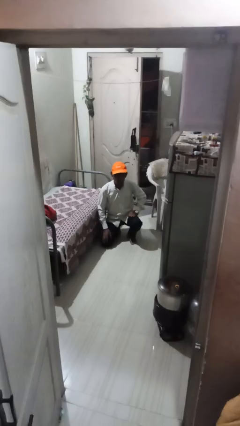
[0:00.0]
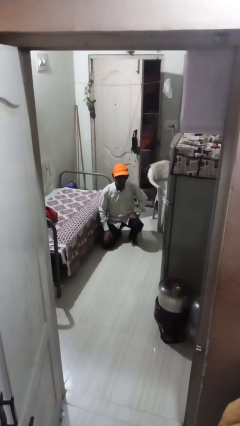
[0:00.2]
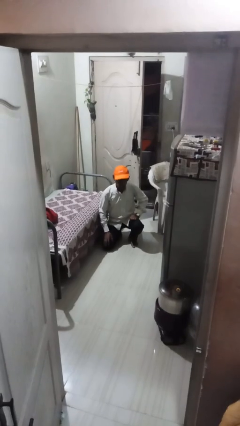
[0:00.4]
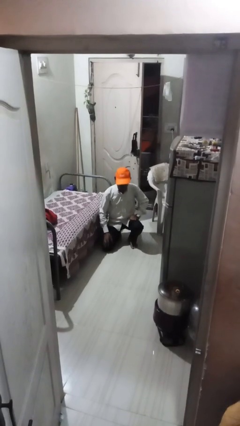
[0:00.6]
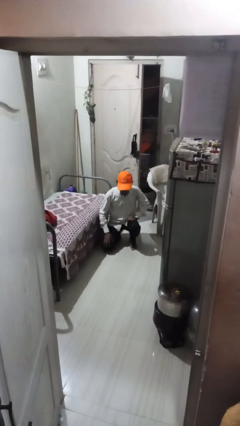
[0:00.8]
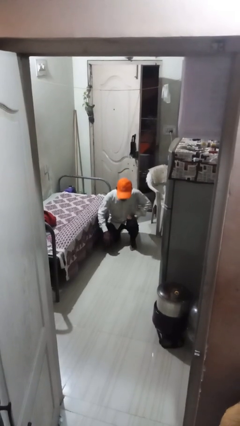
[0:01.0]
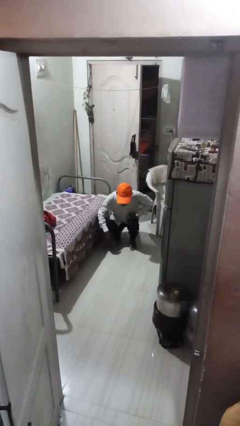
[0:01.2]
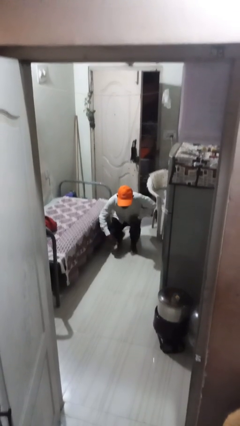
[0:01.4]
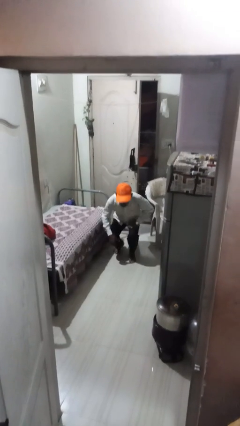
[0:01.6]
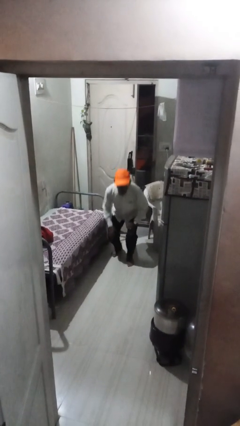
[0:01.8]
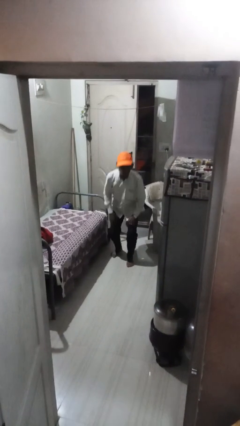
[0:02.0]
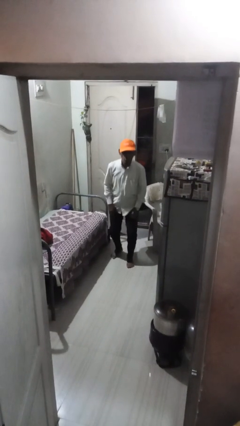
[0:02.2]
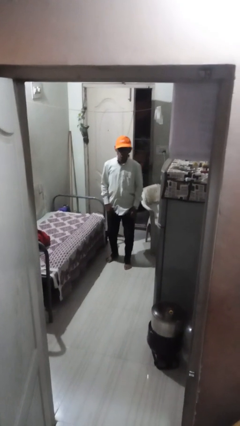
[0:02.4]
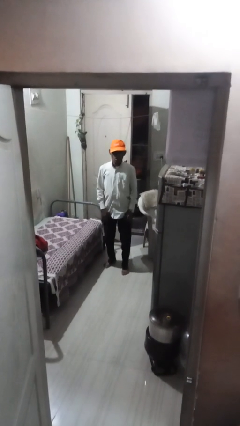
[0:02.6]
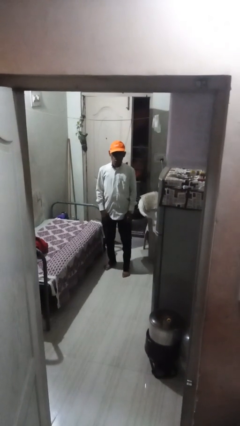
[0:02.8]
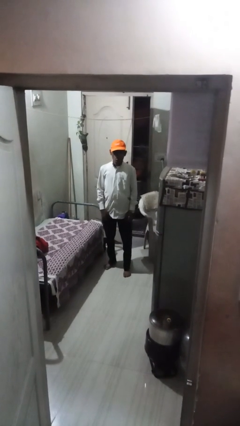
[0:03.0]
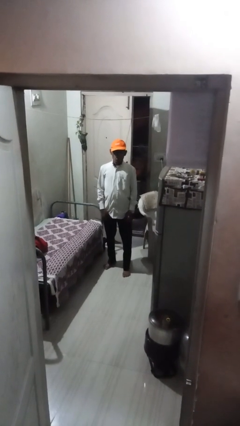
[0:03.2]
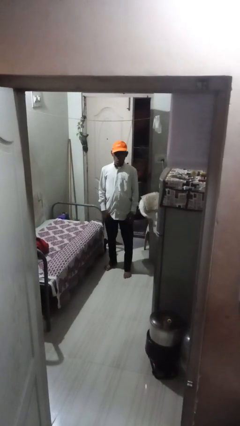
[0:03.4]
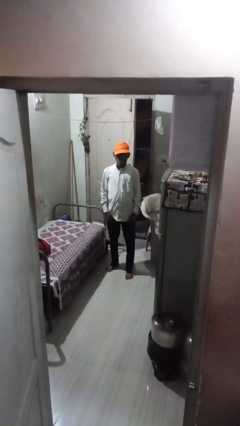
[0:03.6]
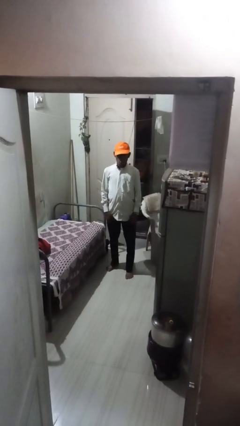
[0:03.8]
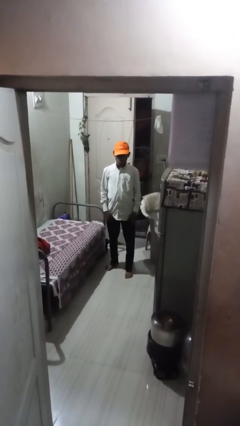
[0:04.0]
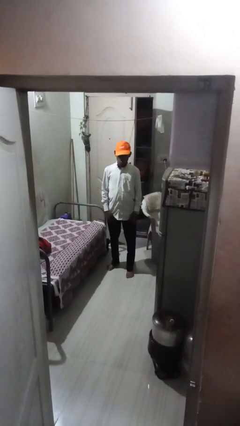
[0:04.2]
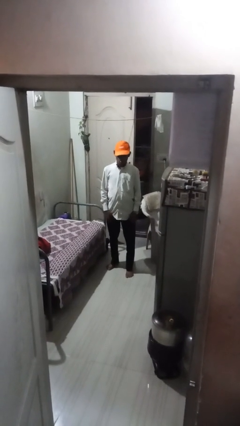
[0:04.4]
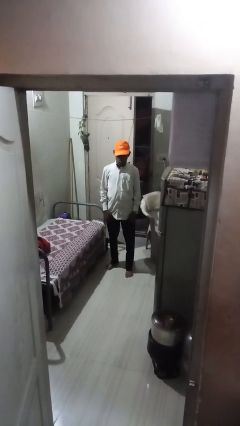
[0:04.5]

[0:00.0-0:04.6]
person stands up from floor

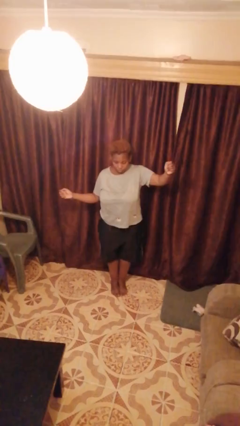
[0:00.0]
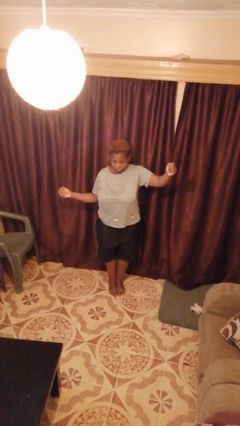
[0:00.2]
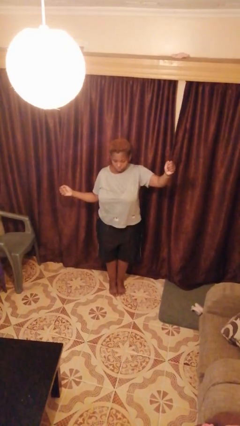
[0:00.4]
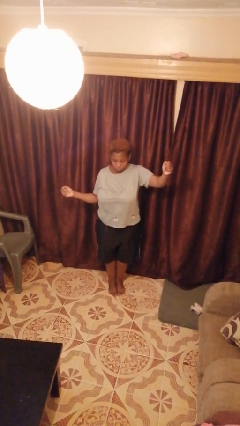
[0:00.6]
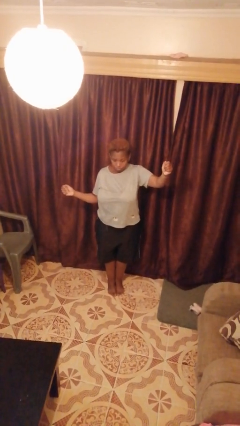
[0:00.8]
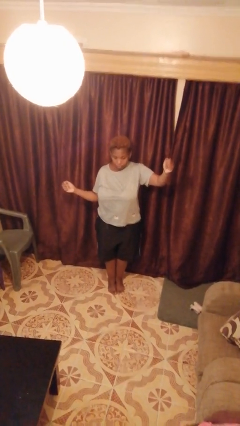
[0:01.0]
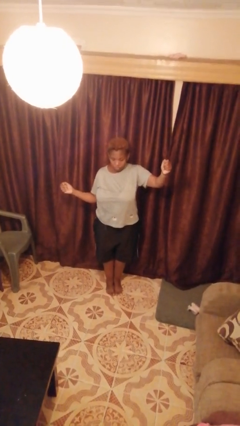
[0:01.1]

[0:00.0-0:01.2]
person gestures zoom in

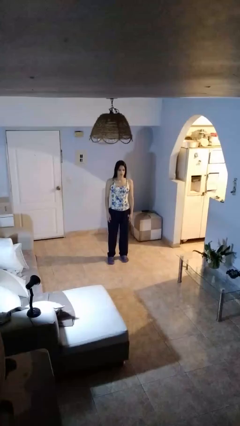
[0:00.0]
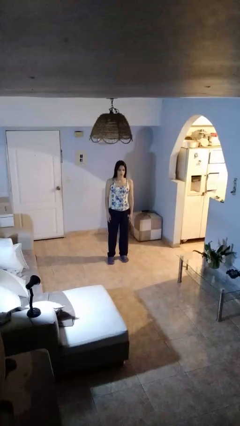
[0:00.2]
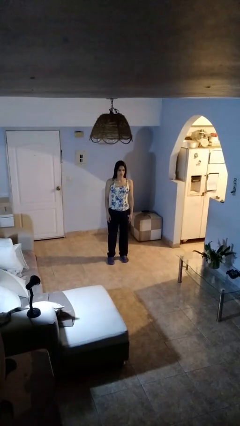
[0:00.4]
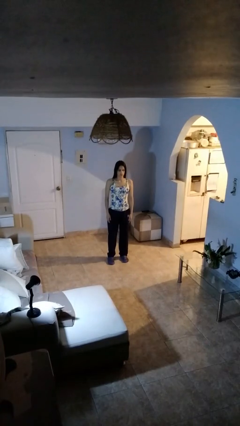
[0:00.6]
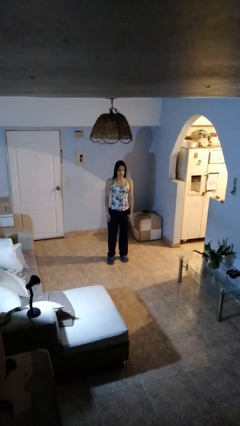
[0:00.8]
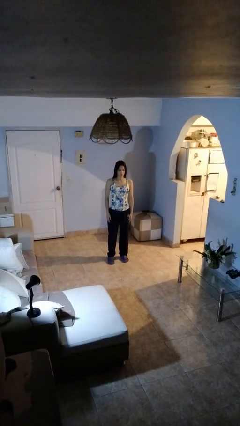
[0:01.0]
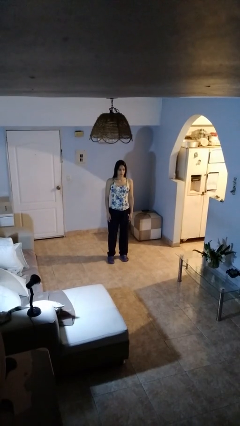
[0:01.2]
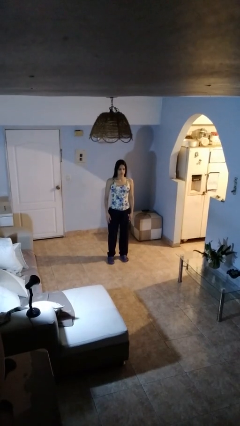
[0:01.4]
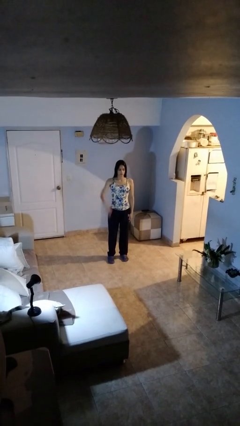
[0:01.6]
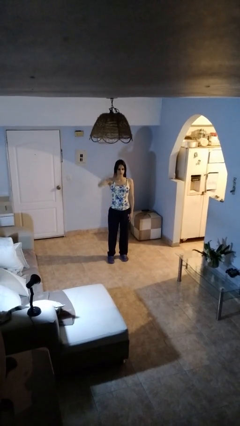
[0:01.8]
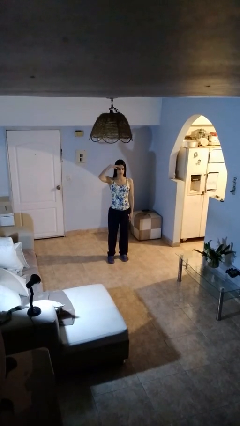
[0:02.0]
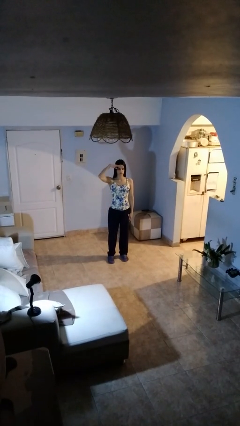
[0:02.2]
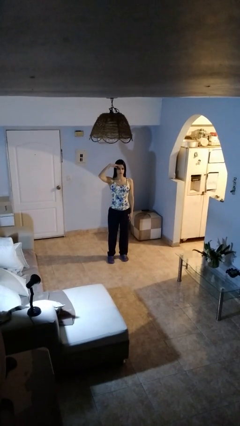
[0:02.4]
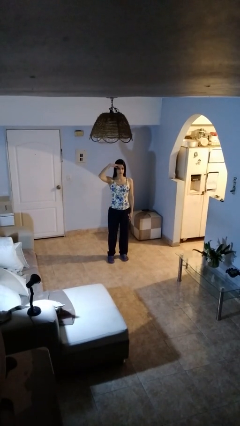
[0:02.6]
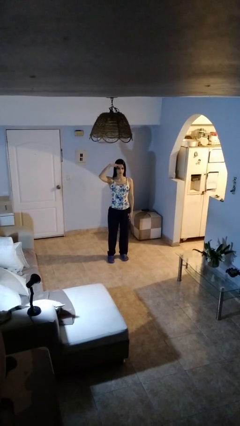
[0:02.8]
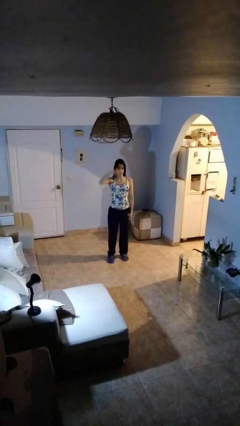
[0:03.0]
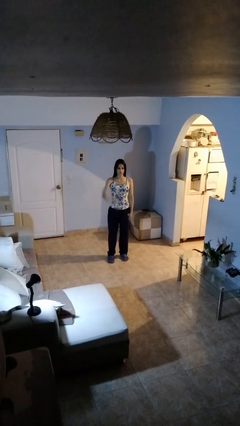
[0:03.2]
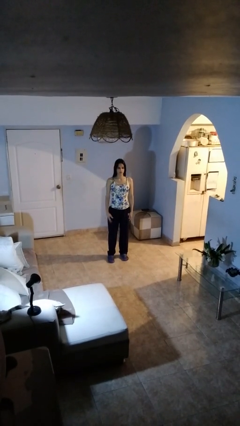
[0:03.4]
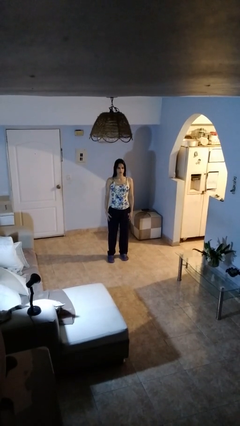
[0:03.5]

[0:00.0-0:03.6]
person salutes

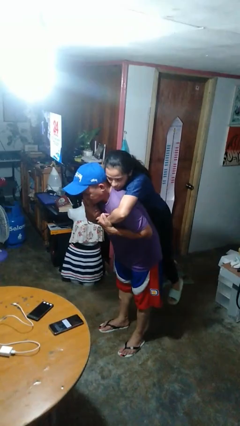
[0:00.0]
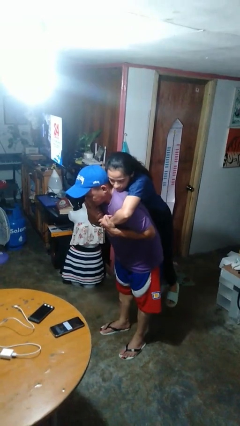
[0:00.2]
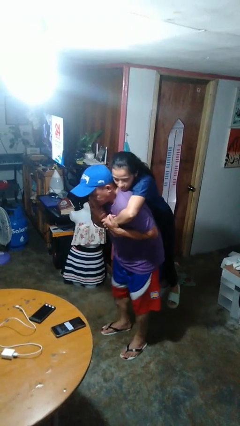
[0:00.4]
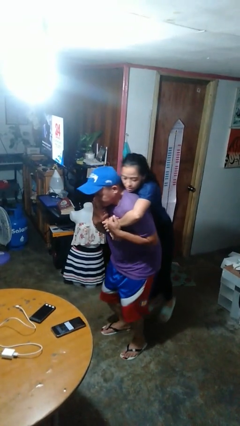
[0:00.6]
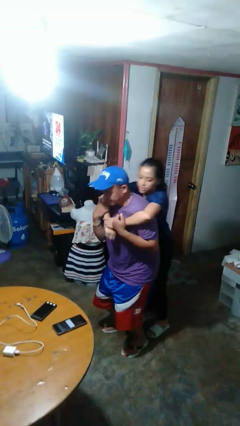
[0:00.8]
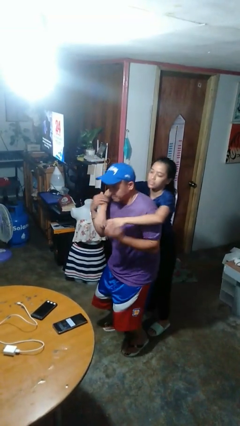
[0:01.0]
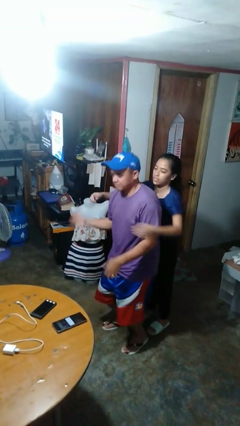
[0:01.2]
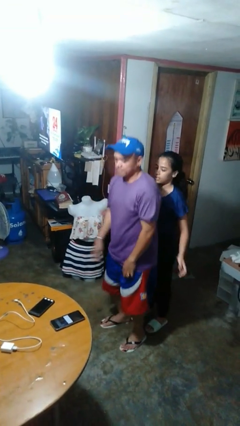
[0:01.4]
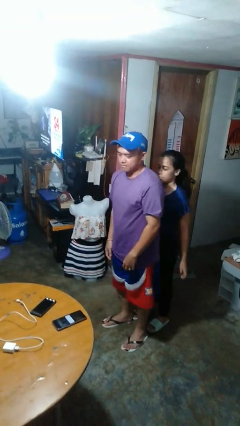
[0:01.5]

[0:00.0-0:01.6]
person puts down person

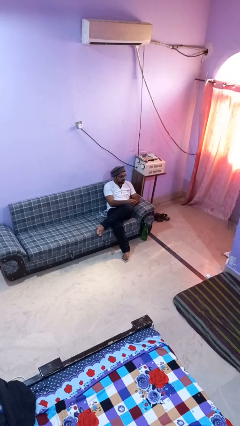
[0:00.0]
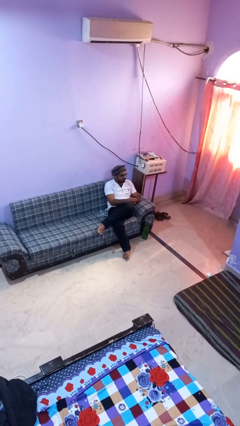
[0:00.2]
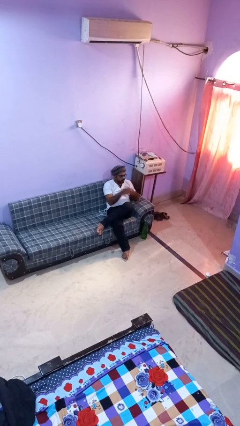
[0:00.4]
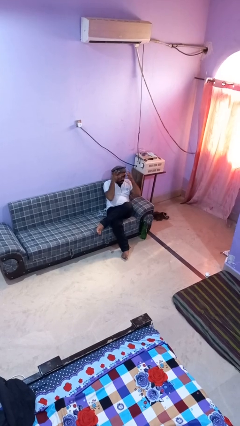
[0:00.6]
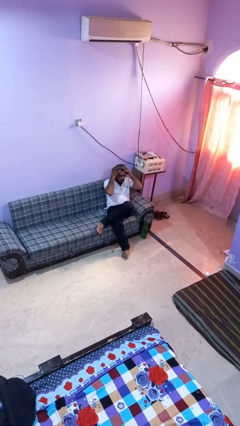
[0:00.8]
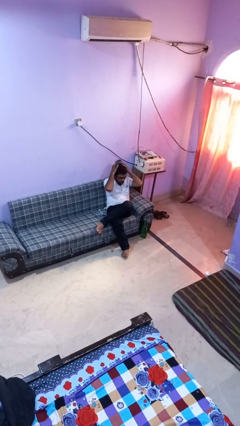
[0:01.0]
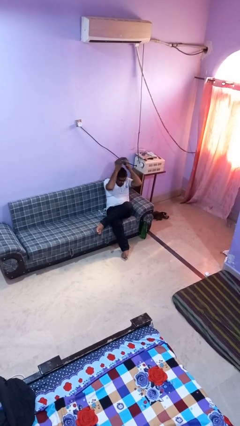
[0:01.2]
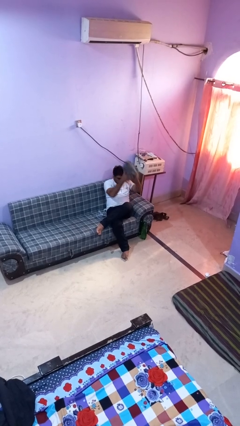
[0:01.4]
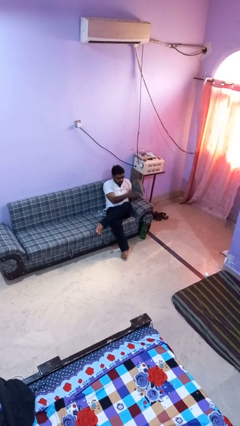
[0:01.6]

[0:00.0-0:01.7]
person takes off hat

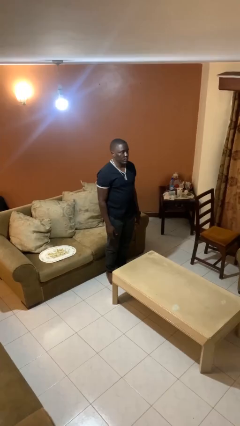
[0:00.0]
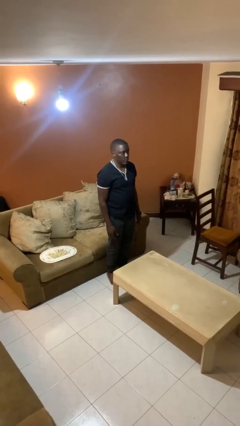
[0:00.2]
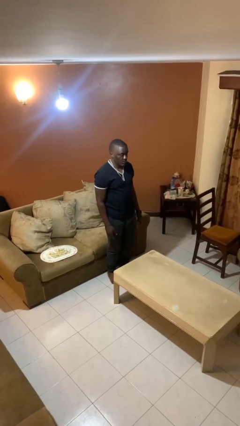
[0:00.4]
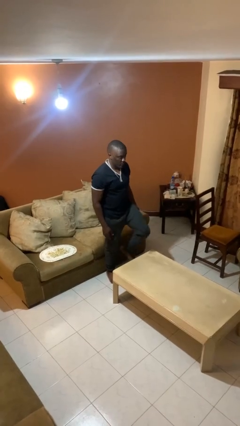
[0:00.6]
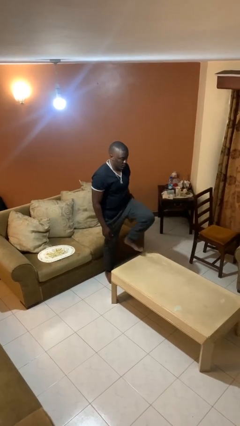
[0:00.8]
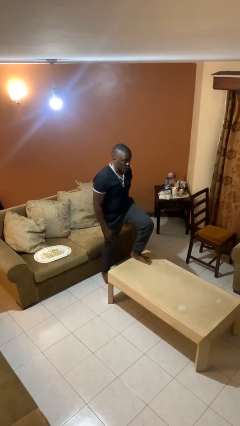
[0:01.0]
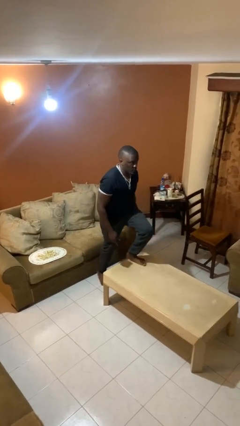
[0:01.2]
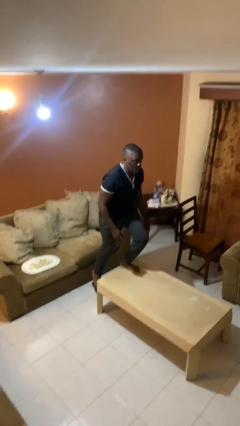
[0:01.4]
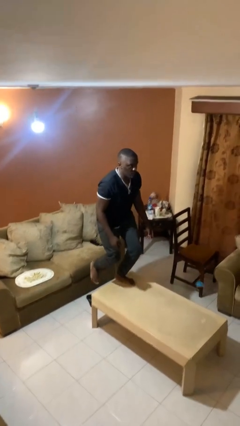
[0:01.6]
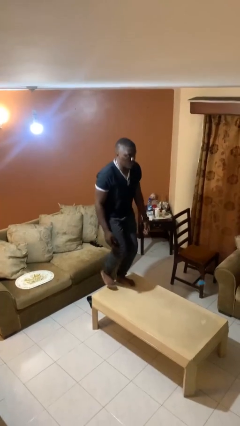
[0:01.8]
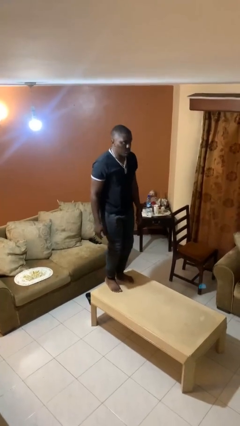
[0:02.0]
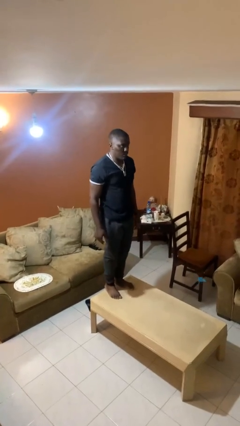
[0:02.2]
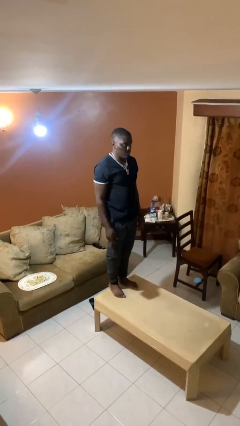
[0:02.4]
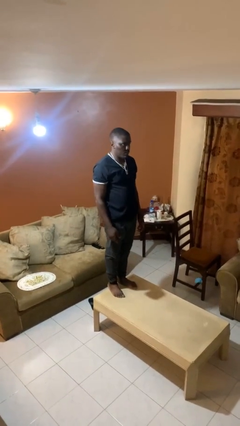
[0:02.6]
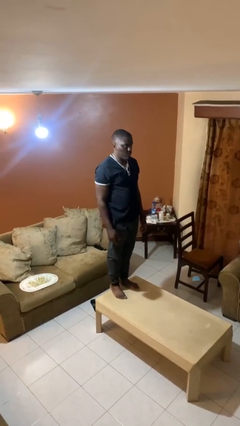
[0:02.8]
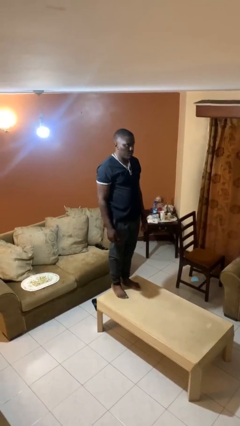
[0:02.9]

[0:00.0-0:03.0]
person climbs on table

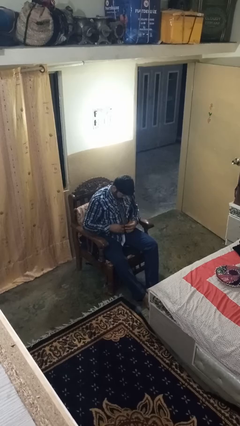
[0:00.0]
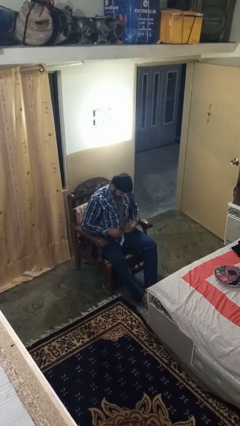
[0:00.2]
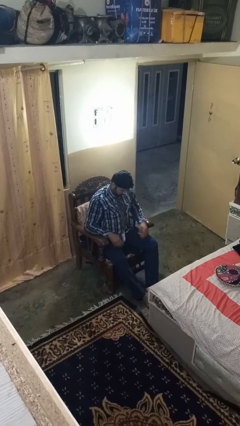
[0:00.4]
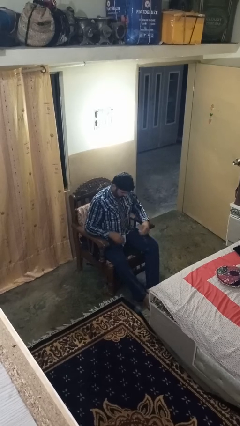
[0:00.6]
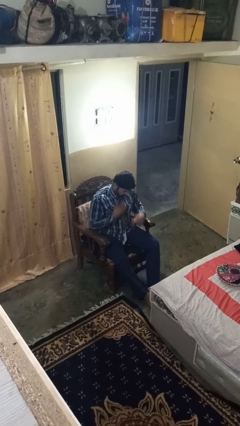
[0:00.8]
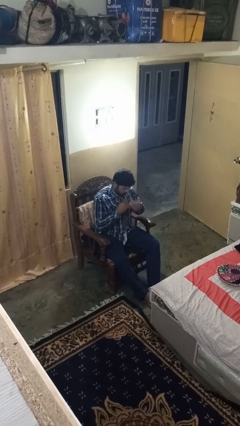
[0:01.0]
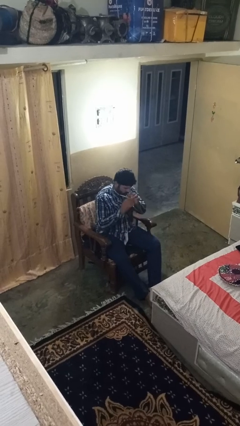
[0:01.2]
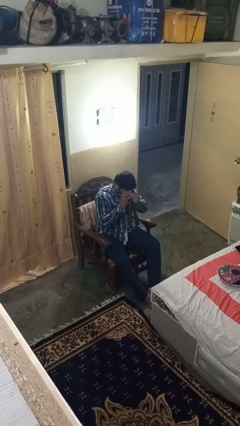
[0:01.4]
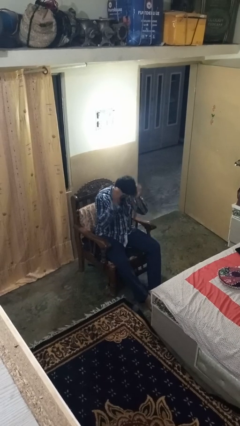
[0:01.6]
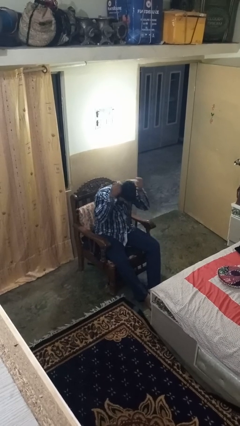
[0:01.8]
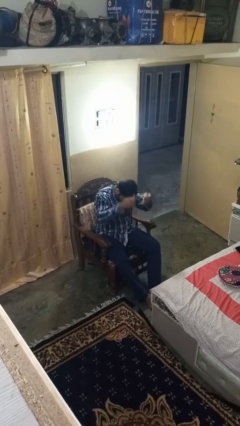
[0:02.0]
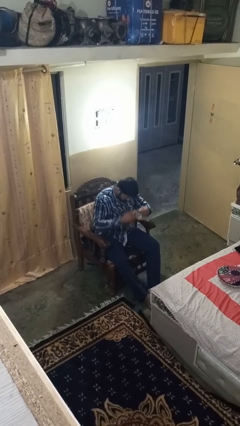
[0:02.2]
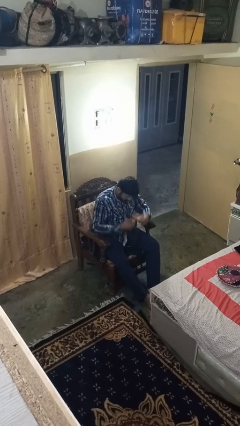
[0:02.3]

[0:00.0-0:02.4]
person takes off necktie
